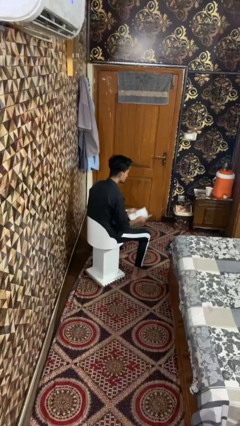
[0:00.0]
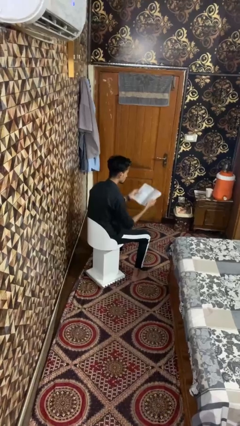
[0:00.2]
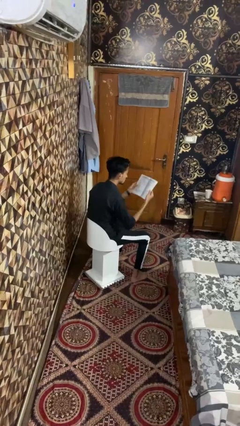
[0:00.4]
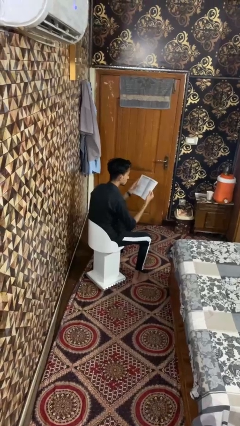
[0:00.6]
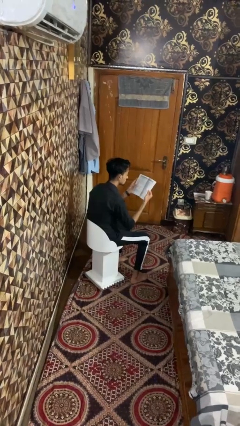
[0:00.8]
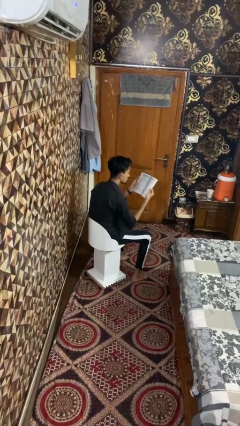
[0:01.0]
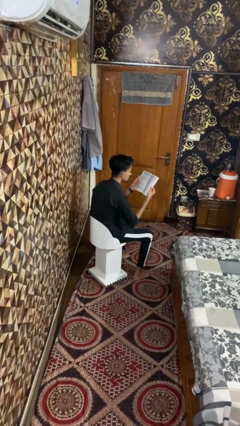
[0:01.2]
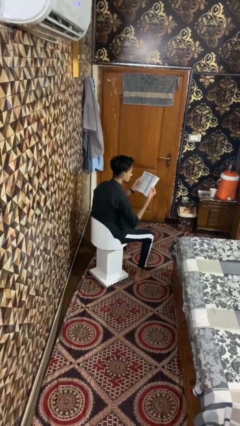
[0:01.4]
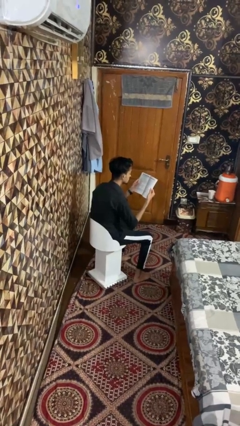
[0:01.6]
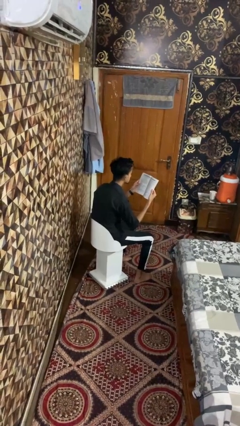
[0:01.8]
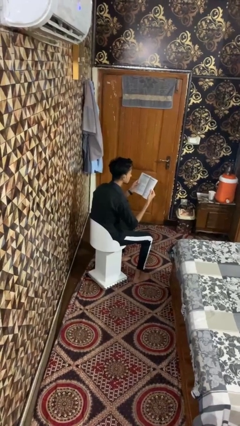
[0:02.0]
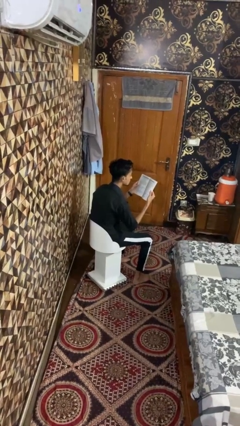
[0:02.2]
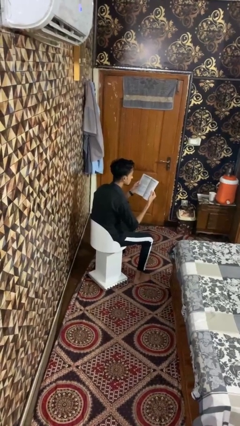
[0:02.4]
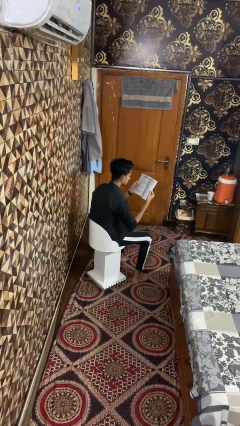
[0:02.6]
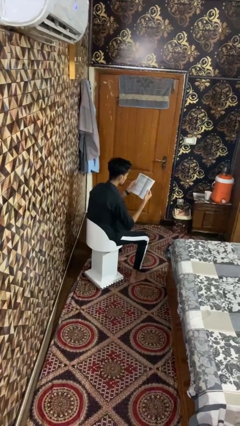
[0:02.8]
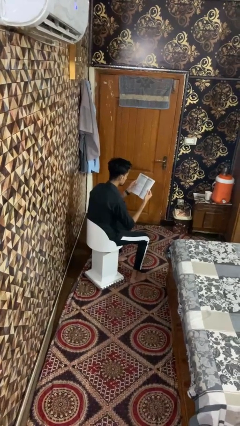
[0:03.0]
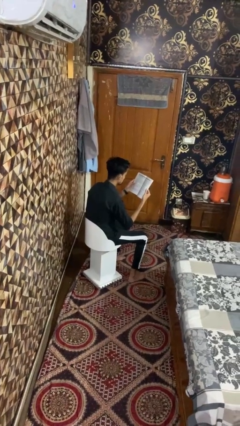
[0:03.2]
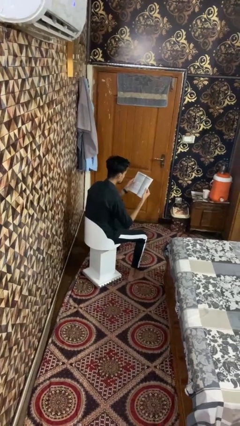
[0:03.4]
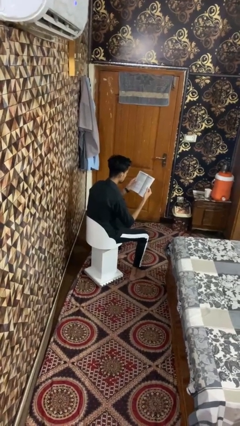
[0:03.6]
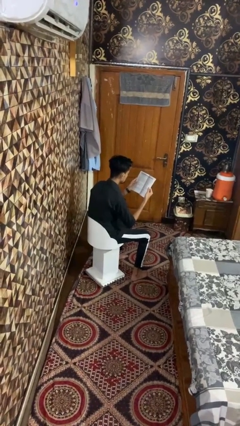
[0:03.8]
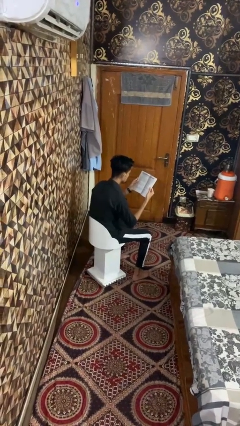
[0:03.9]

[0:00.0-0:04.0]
person reads book

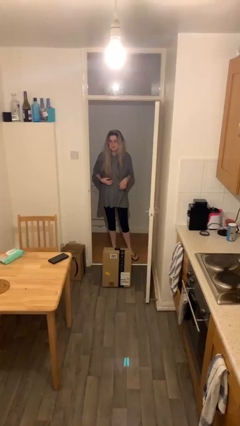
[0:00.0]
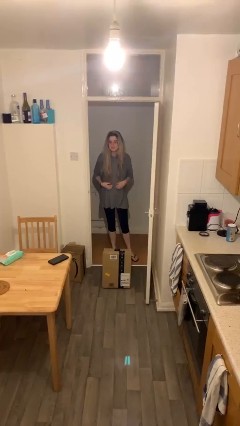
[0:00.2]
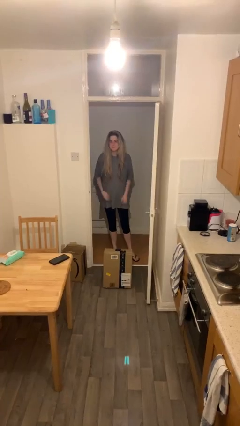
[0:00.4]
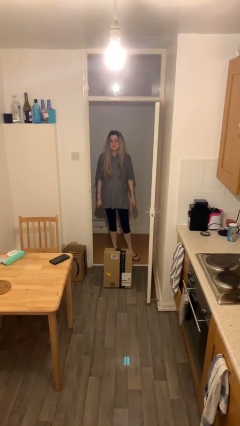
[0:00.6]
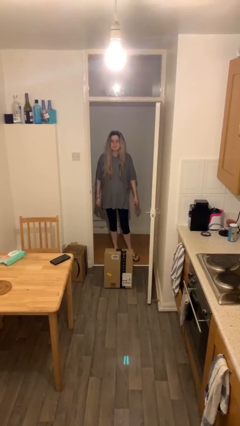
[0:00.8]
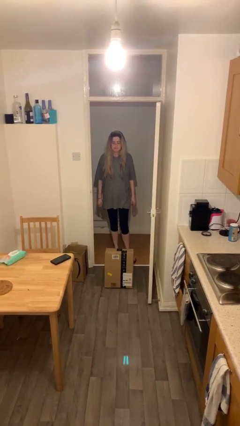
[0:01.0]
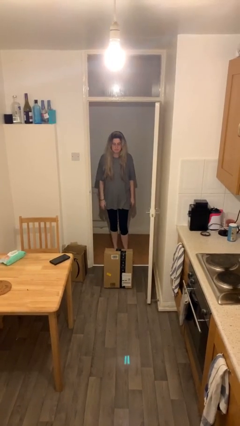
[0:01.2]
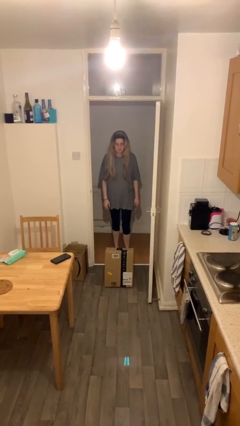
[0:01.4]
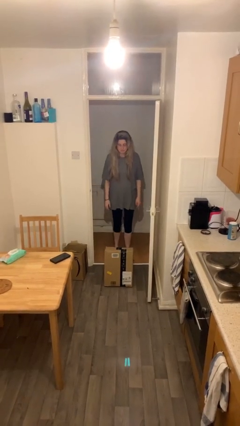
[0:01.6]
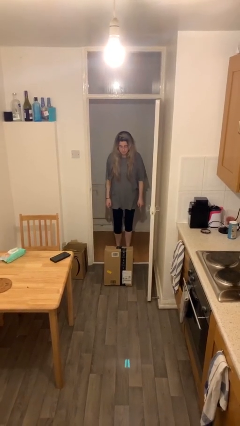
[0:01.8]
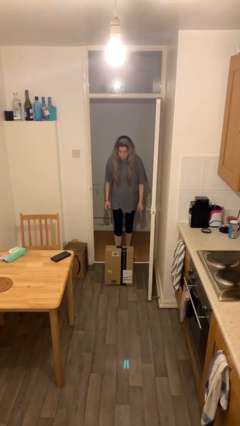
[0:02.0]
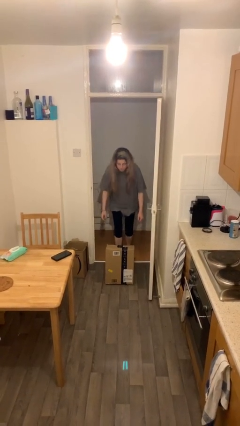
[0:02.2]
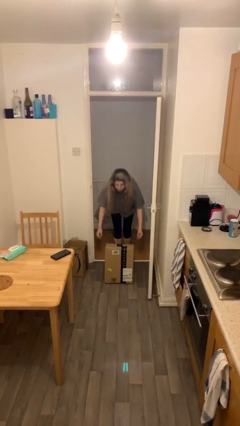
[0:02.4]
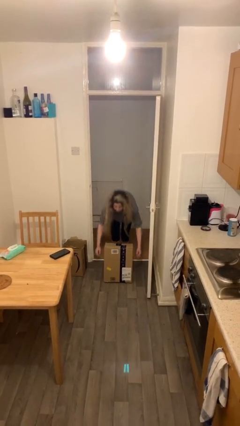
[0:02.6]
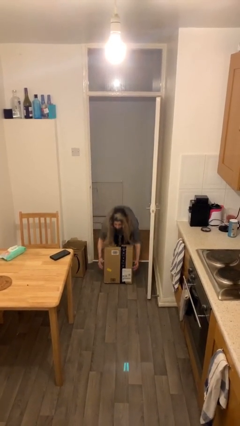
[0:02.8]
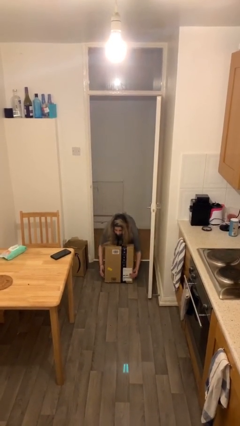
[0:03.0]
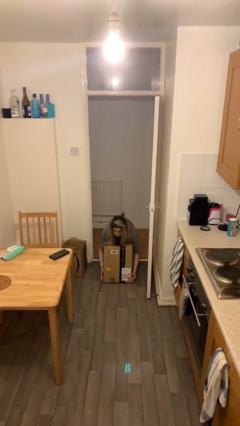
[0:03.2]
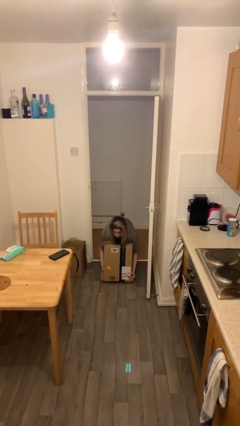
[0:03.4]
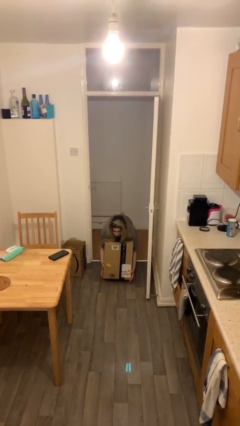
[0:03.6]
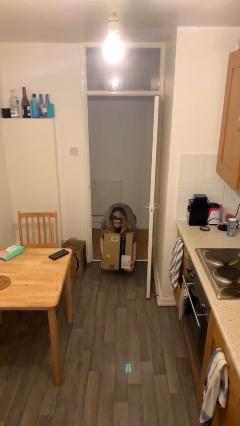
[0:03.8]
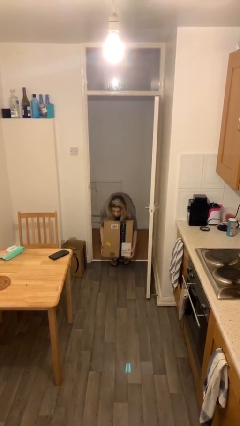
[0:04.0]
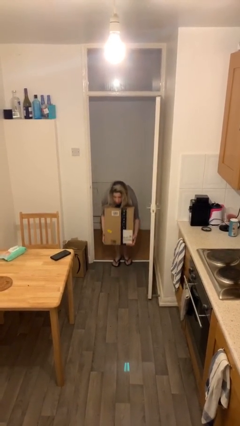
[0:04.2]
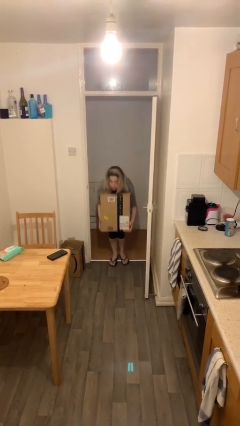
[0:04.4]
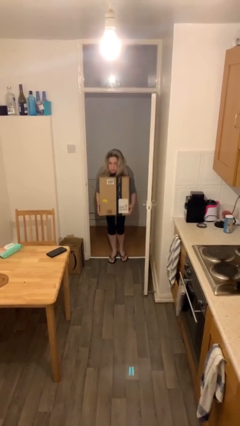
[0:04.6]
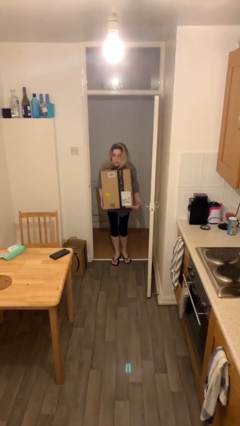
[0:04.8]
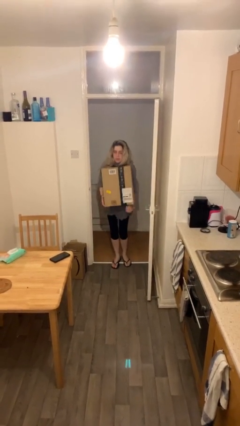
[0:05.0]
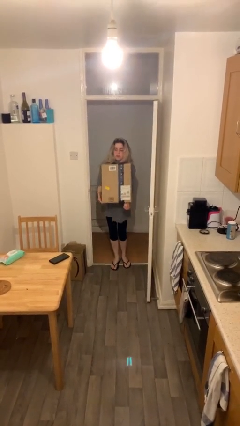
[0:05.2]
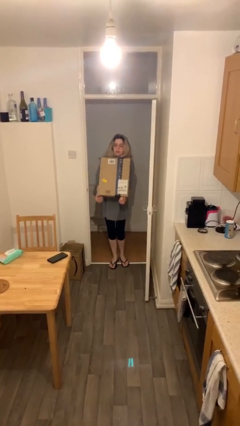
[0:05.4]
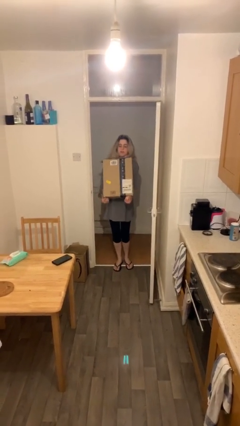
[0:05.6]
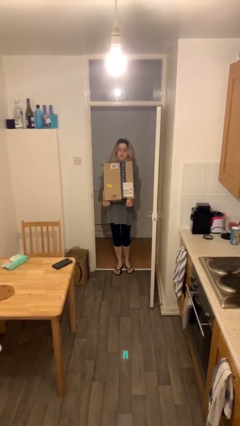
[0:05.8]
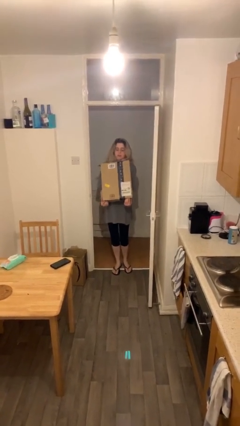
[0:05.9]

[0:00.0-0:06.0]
person picks up object from floor

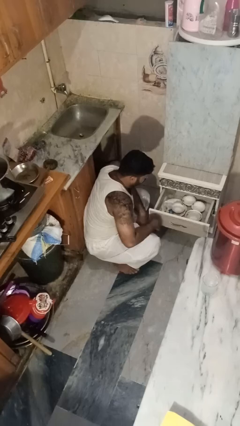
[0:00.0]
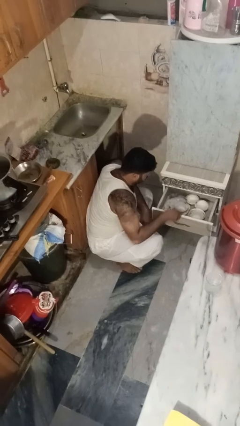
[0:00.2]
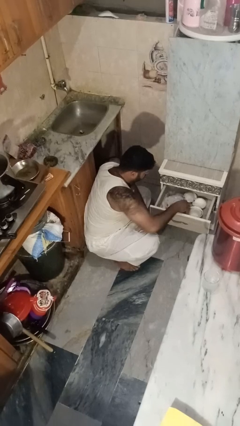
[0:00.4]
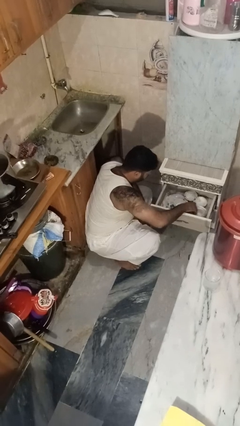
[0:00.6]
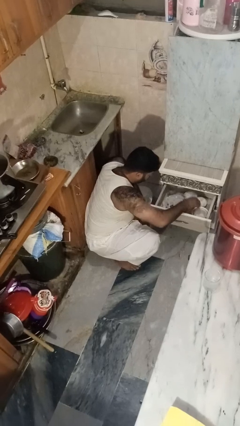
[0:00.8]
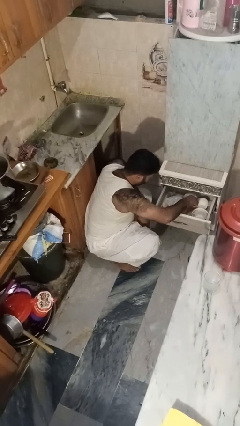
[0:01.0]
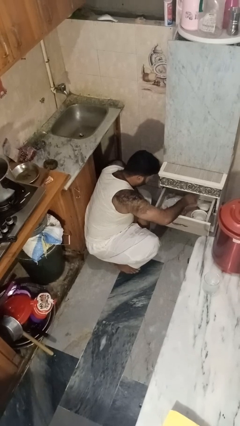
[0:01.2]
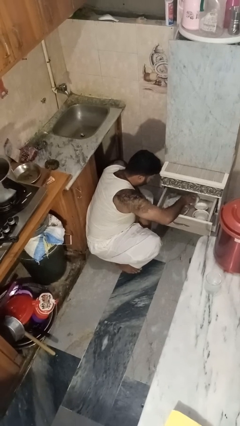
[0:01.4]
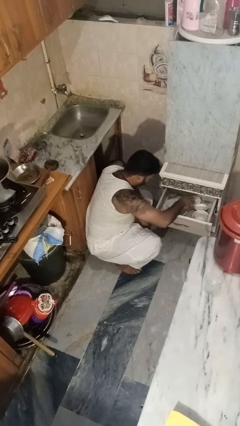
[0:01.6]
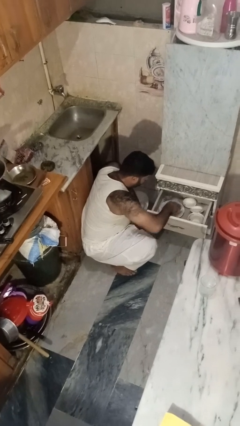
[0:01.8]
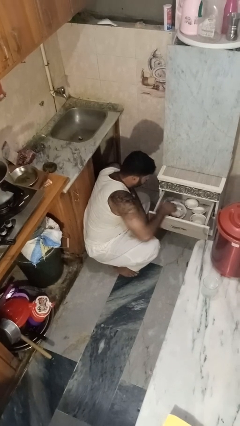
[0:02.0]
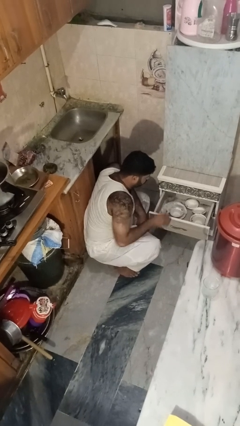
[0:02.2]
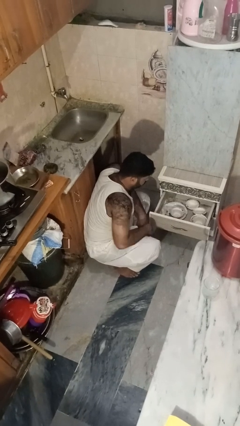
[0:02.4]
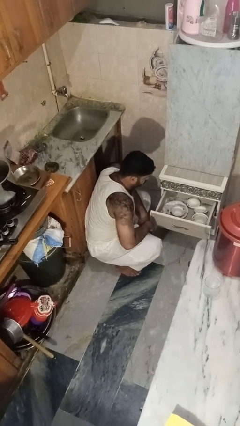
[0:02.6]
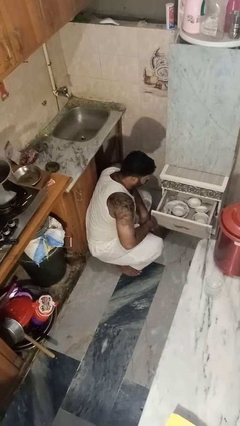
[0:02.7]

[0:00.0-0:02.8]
person searches in kitchen drawer

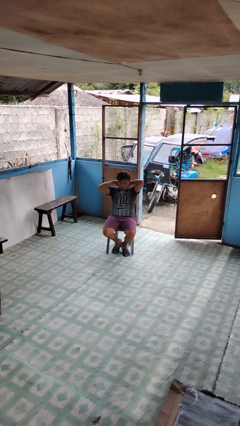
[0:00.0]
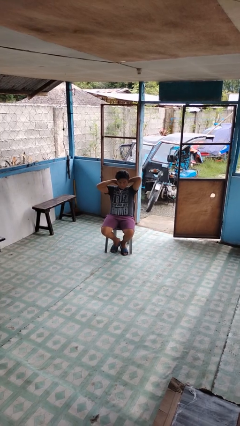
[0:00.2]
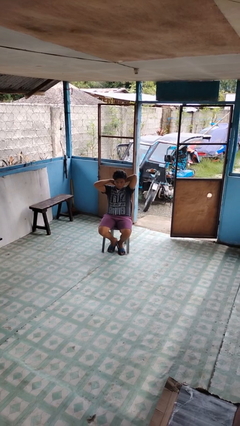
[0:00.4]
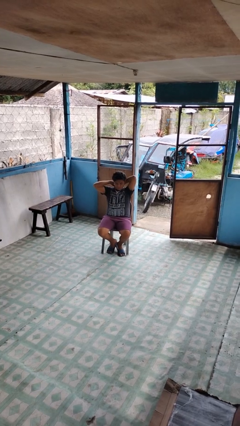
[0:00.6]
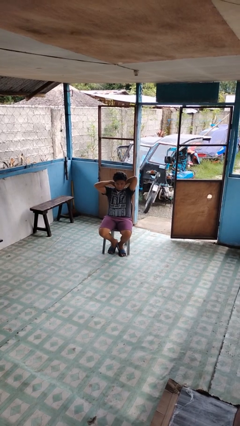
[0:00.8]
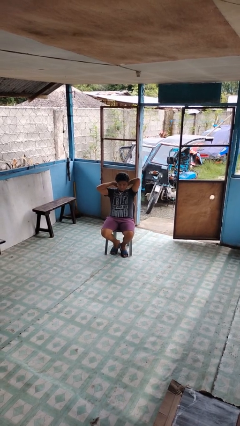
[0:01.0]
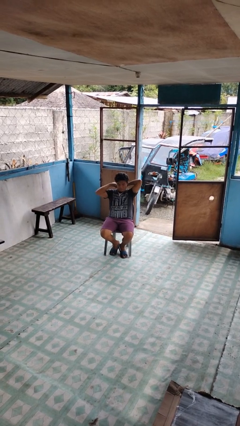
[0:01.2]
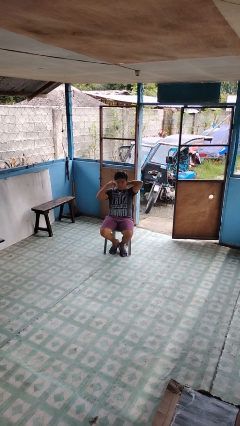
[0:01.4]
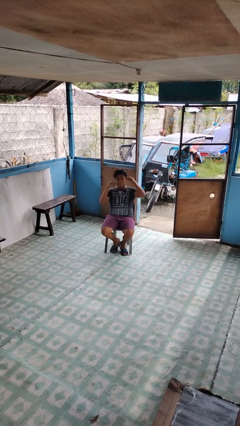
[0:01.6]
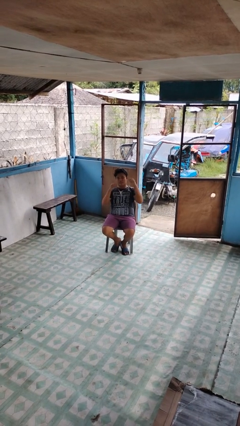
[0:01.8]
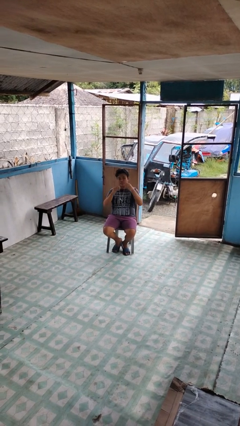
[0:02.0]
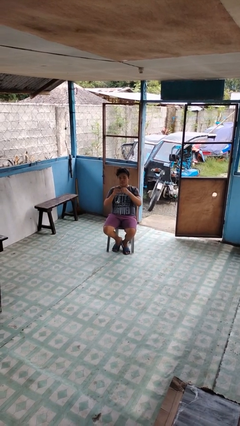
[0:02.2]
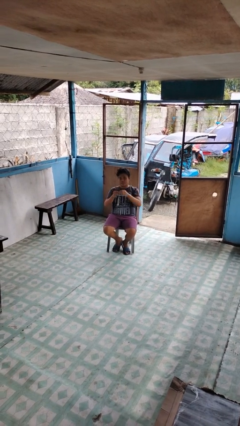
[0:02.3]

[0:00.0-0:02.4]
person takes off necklace

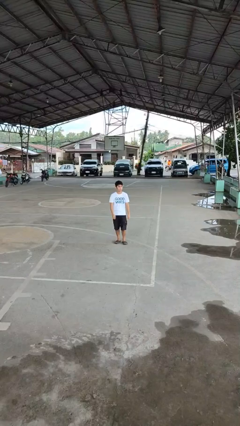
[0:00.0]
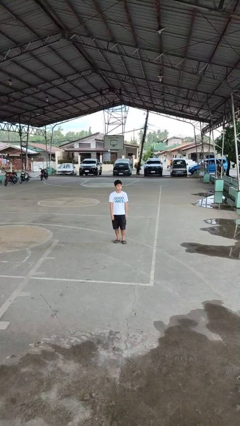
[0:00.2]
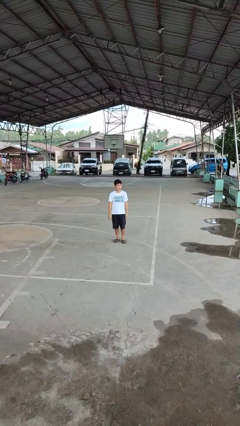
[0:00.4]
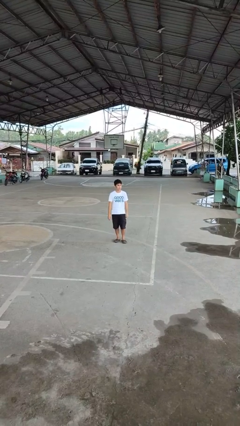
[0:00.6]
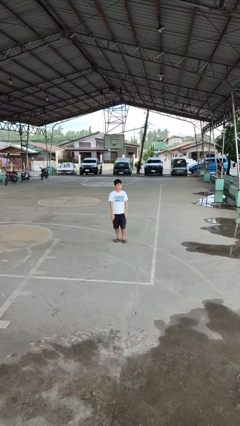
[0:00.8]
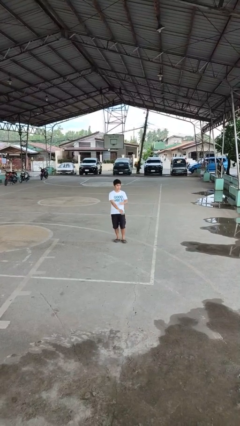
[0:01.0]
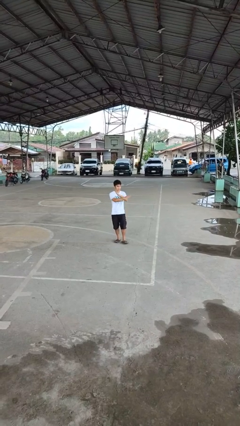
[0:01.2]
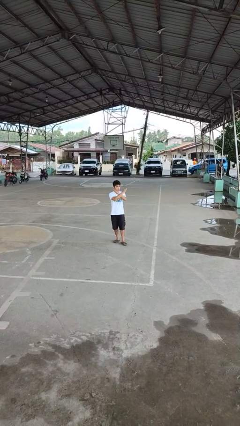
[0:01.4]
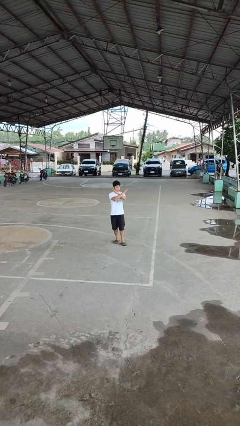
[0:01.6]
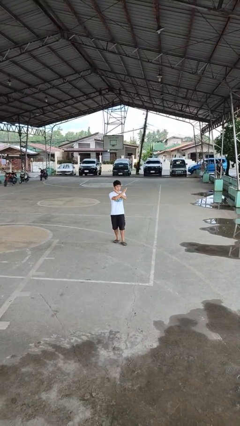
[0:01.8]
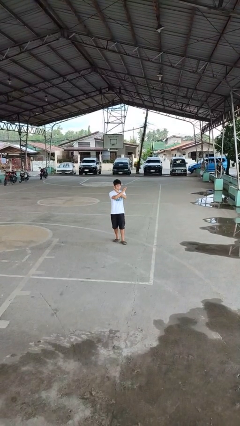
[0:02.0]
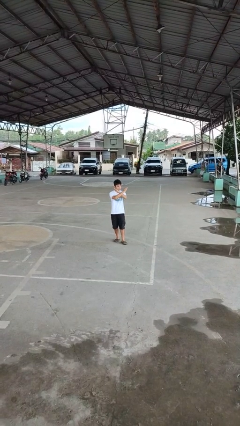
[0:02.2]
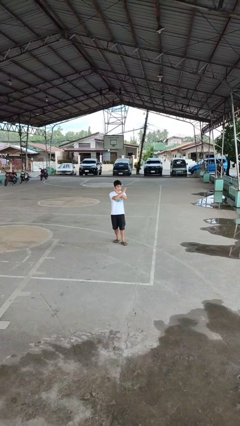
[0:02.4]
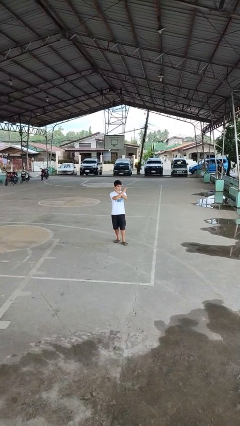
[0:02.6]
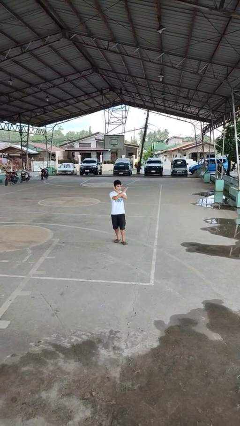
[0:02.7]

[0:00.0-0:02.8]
person gestures arms x
